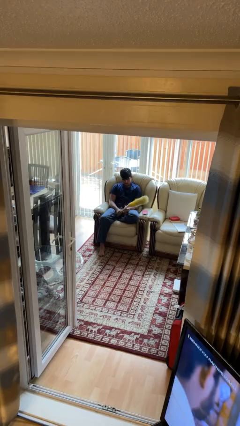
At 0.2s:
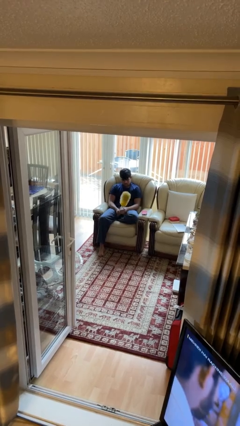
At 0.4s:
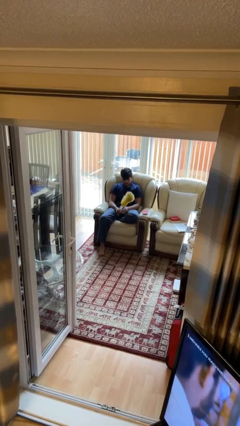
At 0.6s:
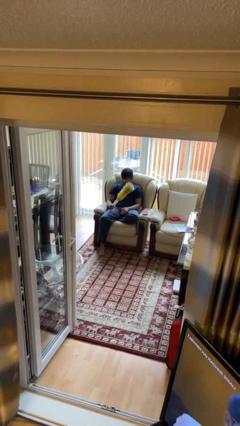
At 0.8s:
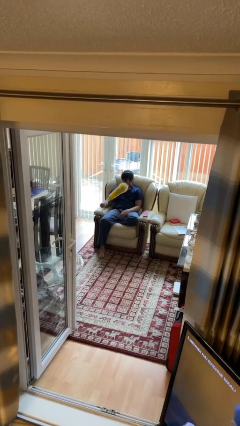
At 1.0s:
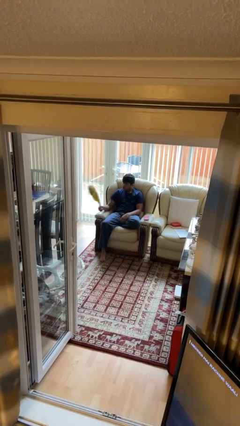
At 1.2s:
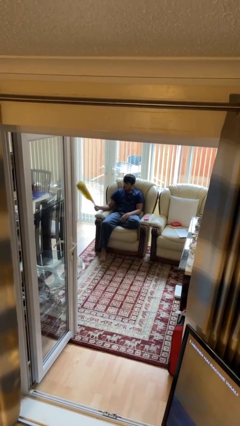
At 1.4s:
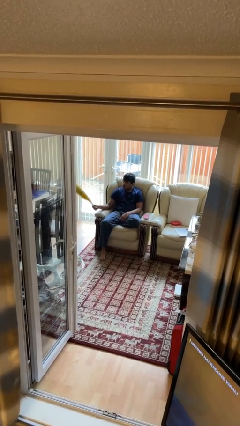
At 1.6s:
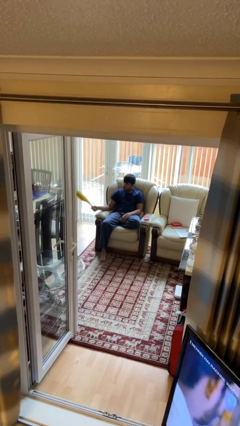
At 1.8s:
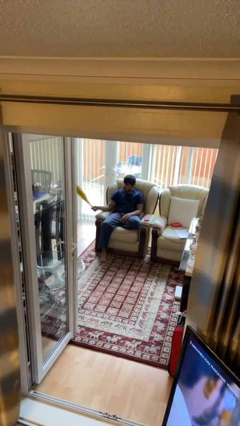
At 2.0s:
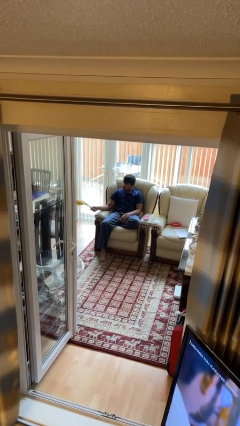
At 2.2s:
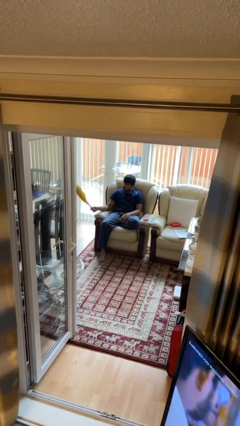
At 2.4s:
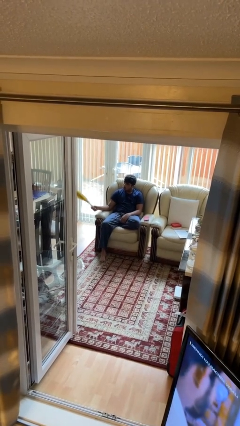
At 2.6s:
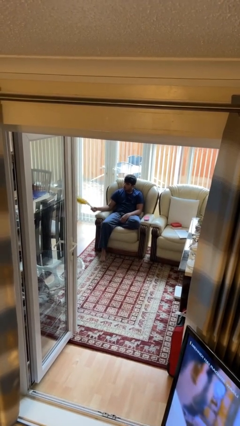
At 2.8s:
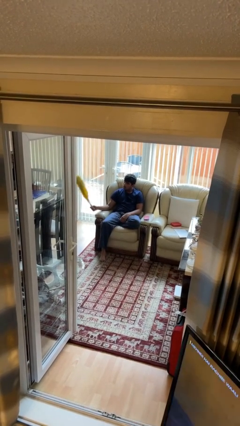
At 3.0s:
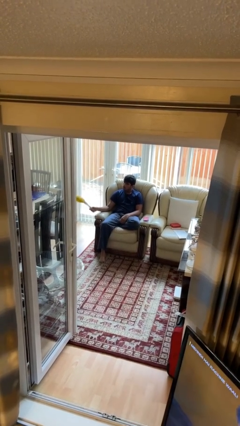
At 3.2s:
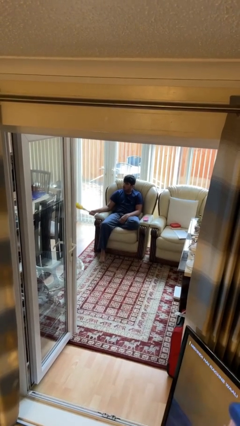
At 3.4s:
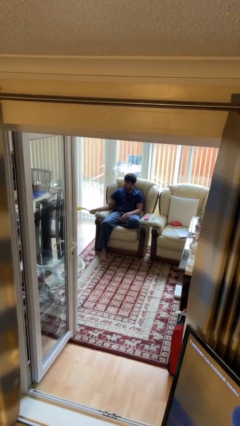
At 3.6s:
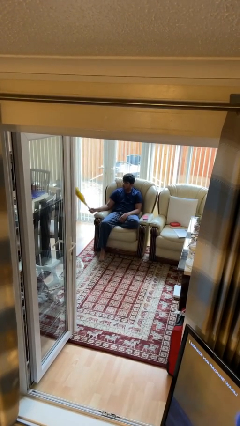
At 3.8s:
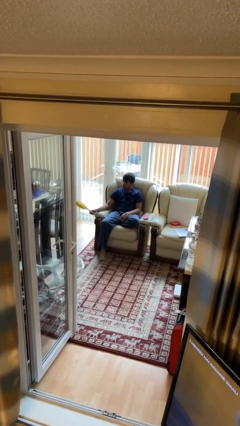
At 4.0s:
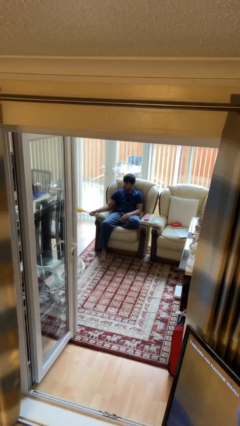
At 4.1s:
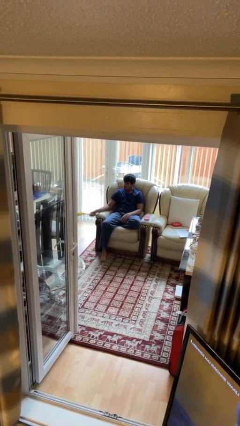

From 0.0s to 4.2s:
person dusts furniture

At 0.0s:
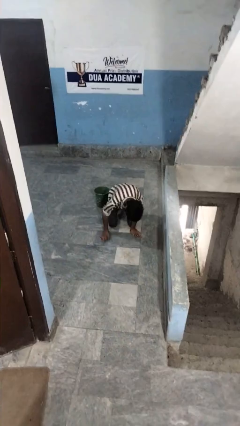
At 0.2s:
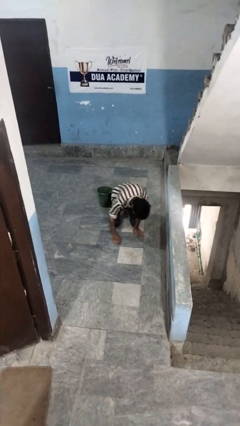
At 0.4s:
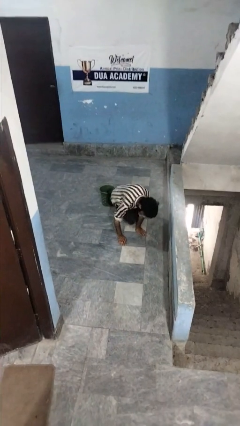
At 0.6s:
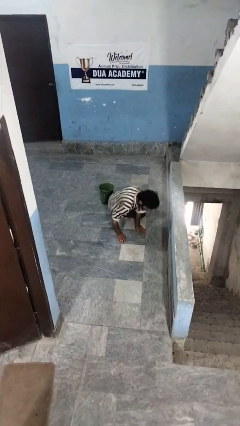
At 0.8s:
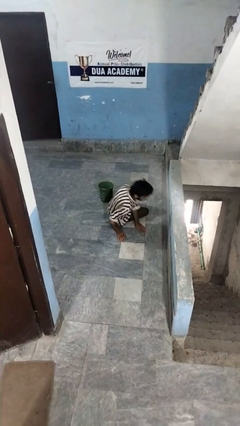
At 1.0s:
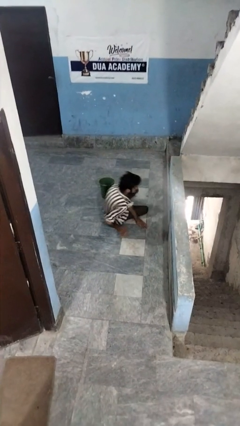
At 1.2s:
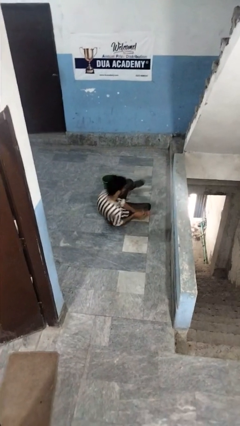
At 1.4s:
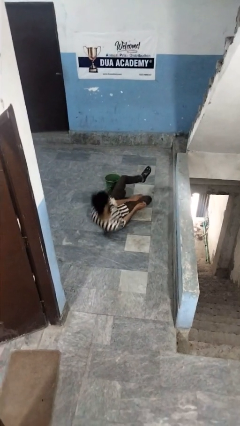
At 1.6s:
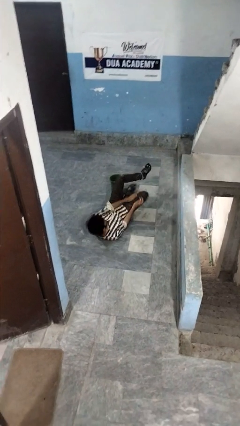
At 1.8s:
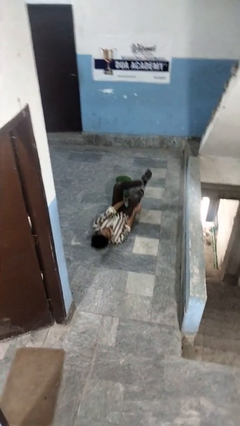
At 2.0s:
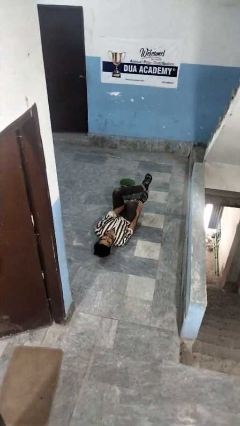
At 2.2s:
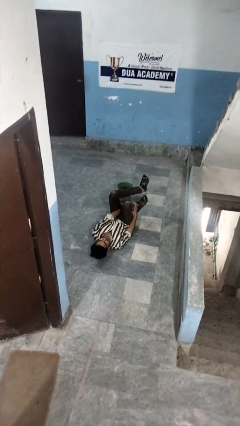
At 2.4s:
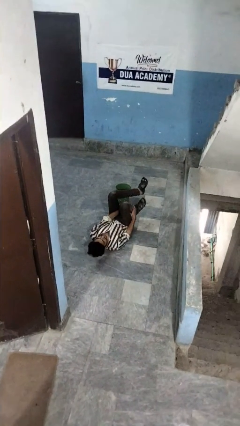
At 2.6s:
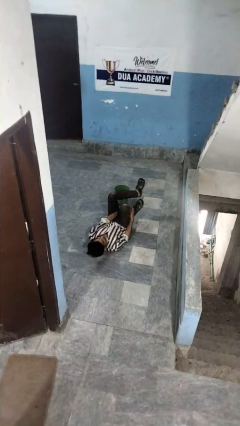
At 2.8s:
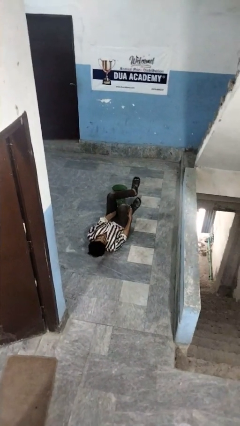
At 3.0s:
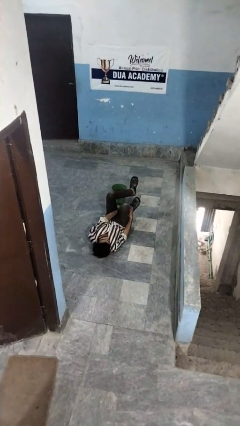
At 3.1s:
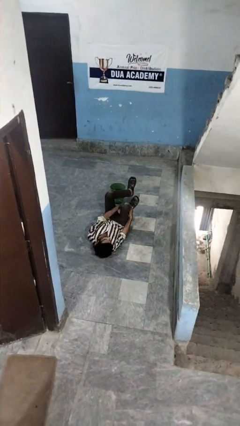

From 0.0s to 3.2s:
person lies down on floor

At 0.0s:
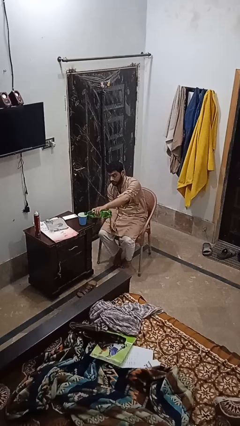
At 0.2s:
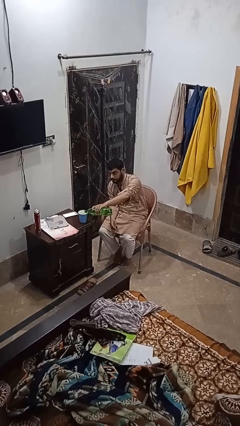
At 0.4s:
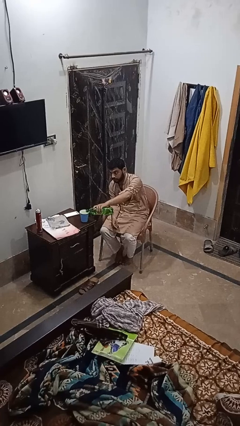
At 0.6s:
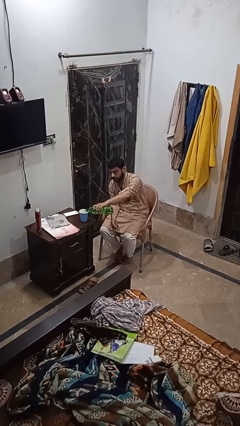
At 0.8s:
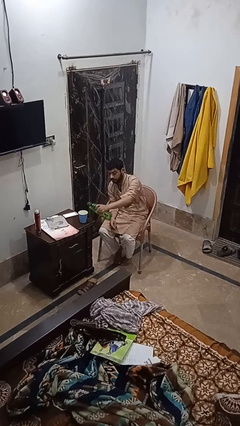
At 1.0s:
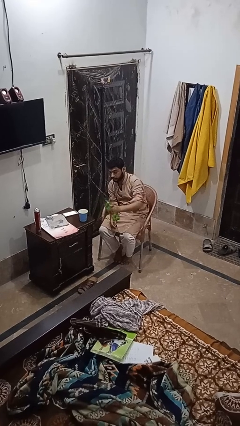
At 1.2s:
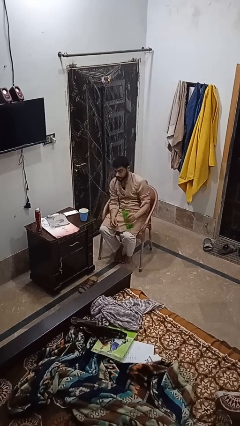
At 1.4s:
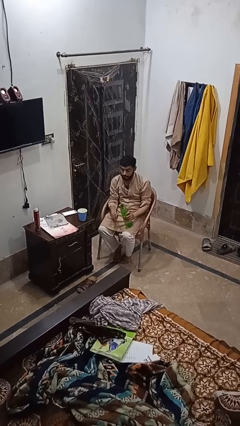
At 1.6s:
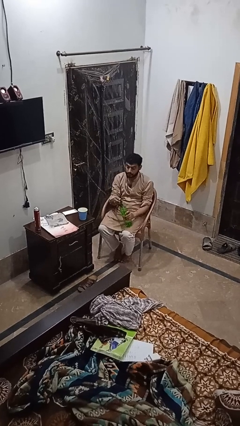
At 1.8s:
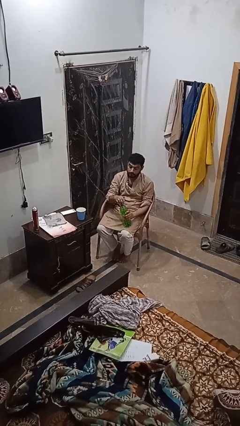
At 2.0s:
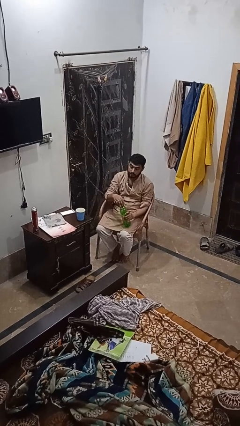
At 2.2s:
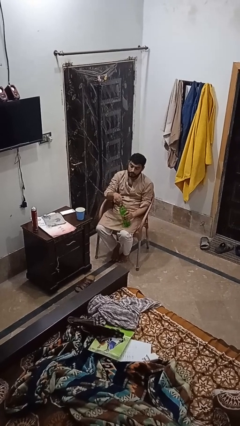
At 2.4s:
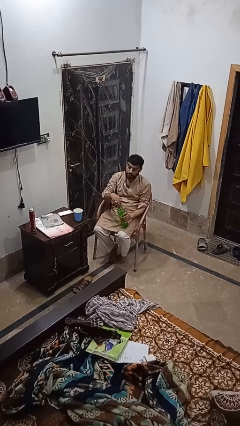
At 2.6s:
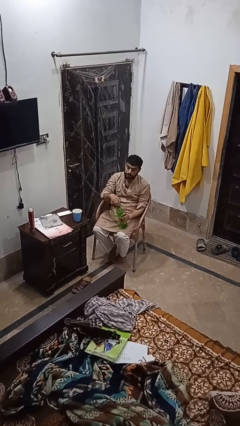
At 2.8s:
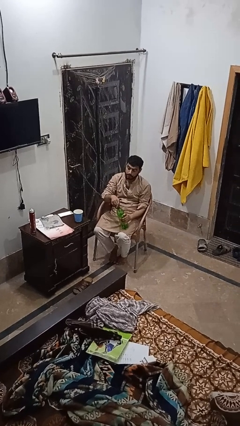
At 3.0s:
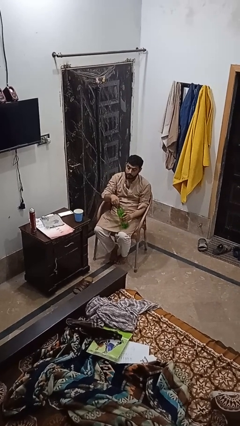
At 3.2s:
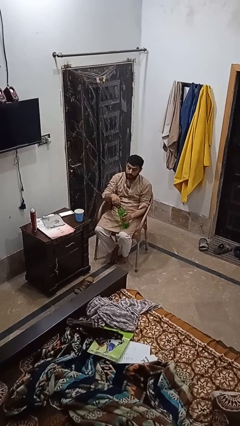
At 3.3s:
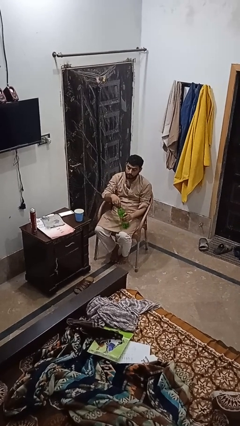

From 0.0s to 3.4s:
person screws lid to bottle

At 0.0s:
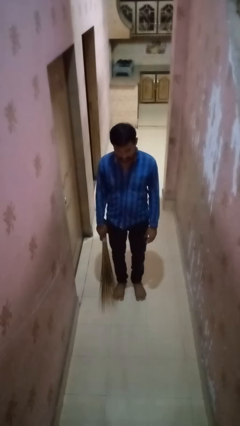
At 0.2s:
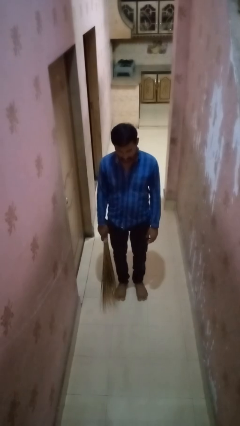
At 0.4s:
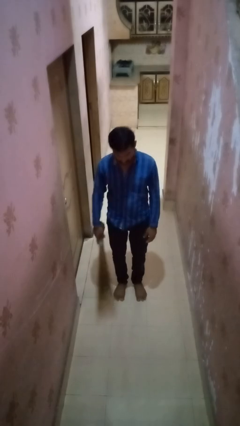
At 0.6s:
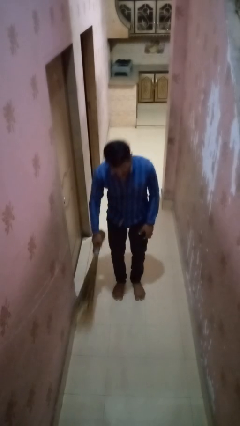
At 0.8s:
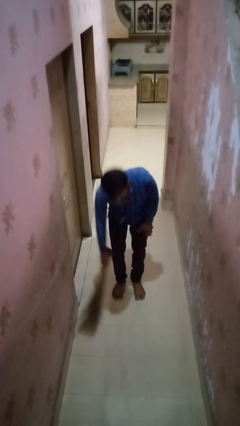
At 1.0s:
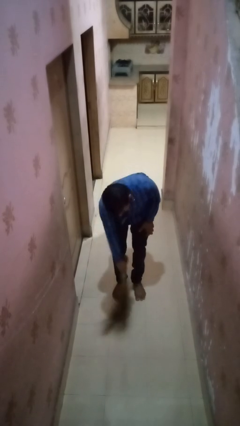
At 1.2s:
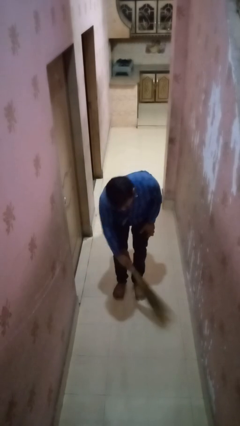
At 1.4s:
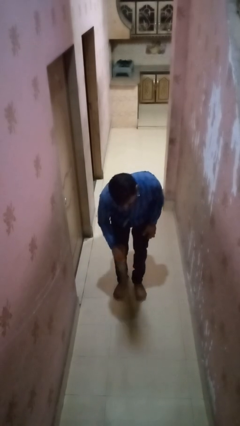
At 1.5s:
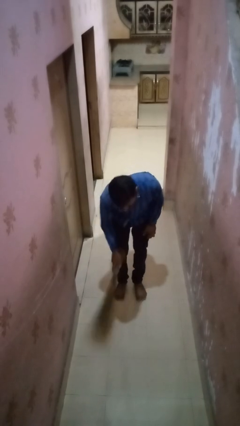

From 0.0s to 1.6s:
person sweeps floor

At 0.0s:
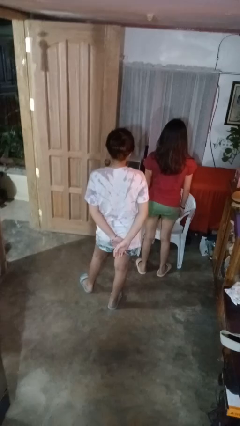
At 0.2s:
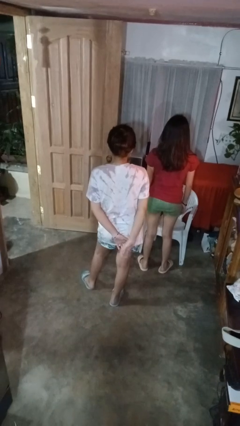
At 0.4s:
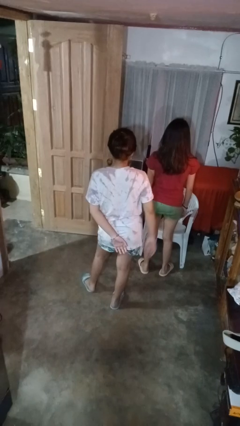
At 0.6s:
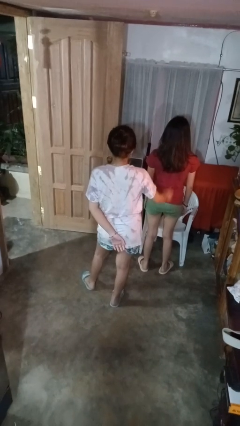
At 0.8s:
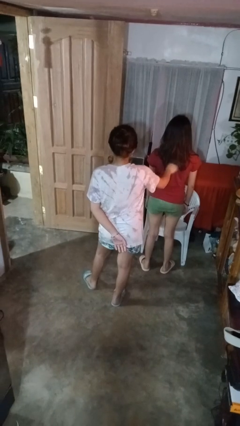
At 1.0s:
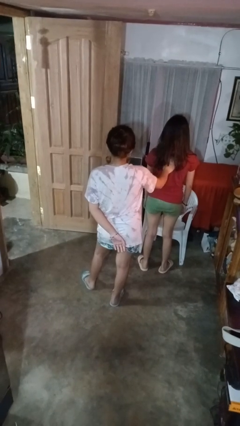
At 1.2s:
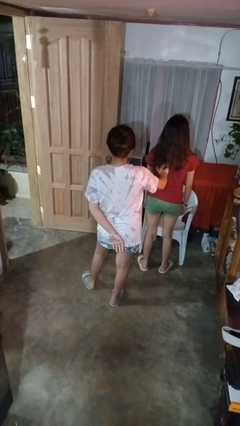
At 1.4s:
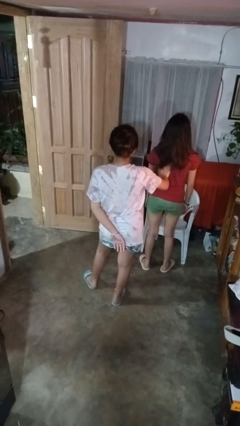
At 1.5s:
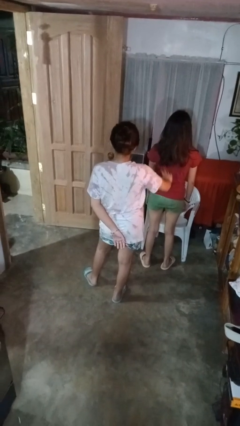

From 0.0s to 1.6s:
person touches back of person

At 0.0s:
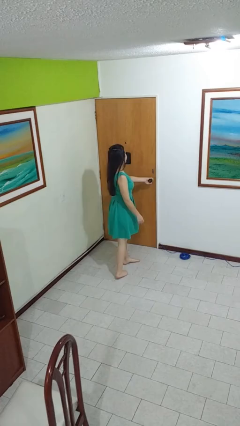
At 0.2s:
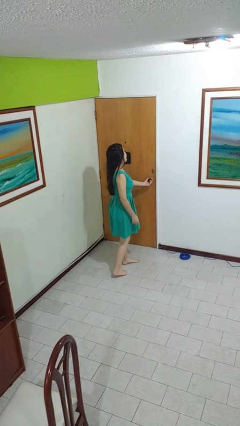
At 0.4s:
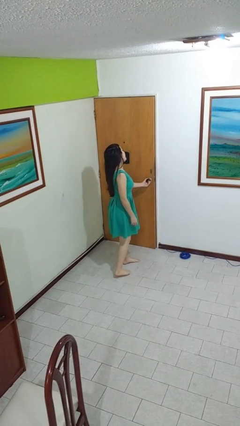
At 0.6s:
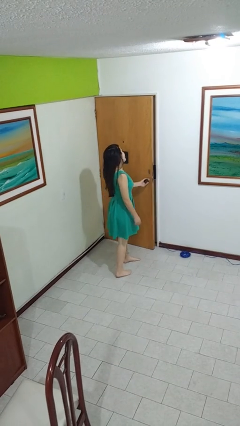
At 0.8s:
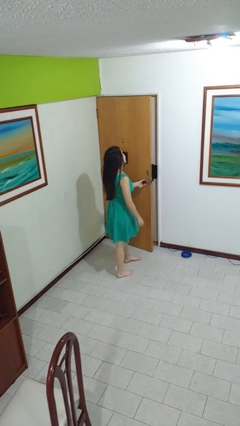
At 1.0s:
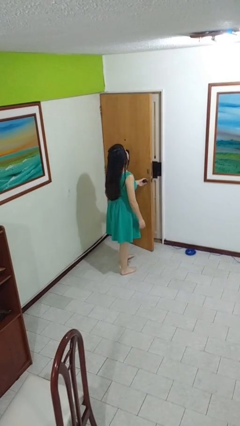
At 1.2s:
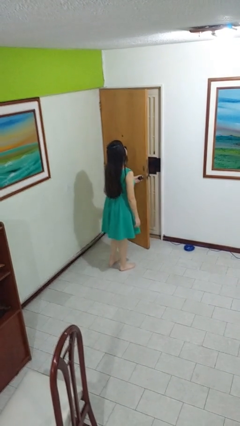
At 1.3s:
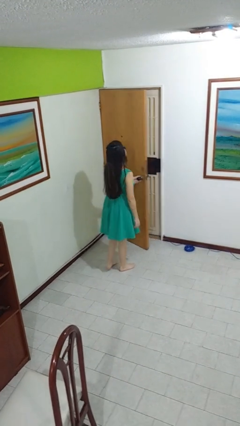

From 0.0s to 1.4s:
person opens facility door

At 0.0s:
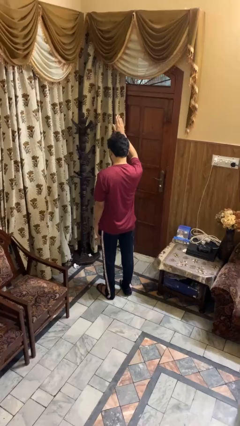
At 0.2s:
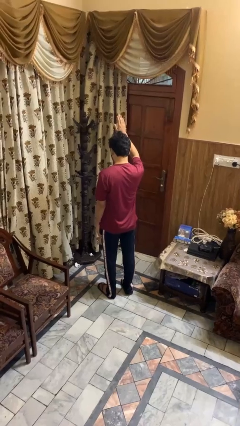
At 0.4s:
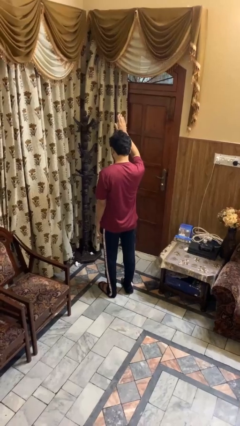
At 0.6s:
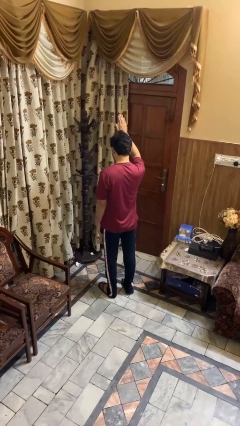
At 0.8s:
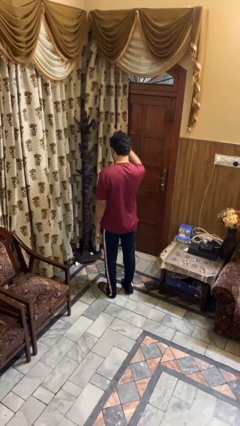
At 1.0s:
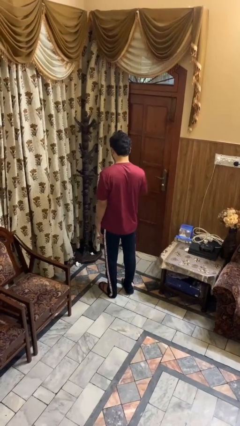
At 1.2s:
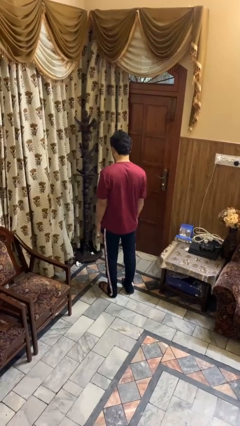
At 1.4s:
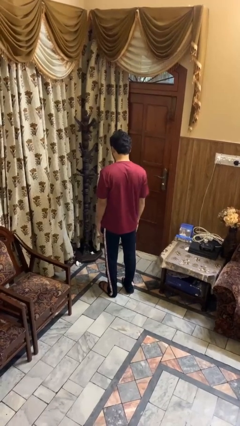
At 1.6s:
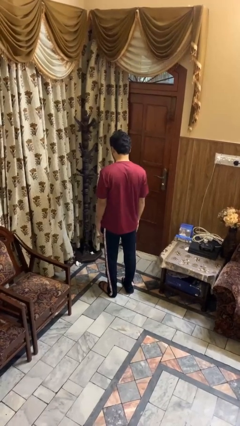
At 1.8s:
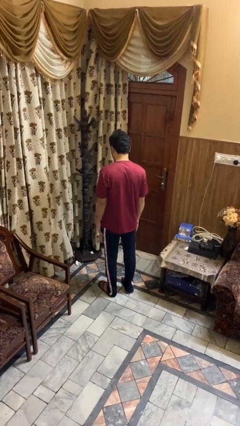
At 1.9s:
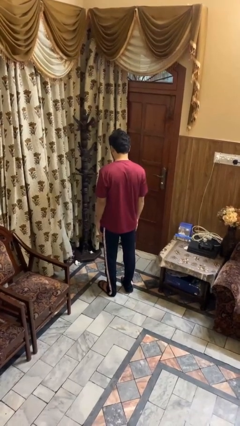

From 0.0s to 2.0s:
person gestures lower hand
